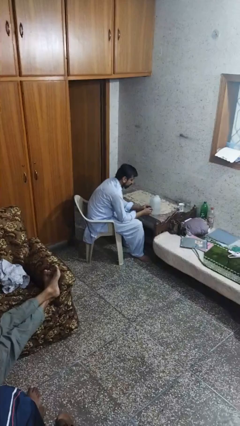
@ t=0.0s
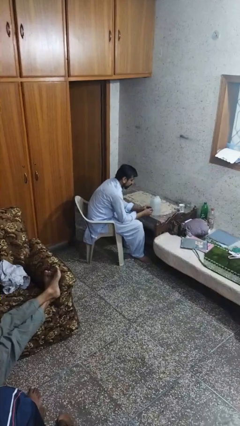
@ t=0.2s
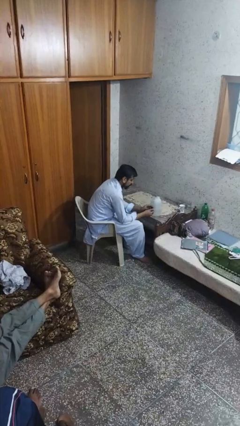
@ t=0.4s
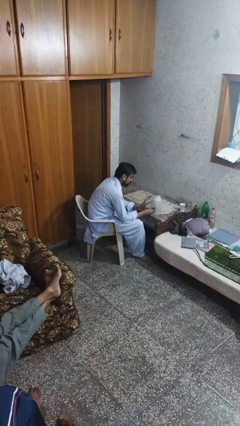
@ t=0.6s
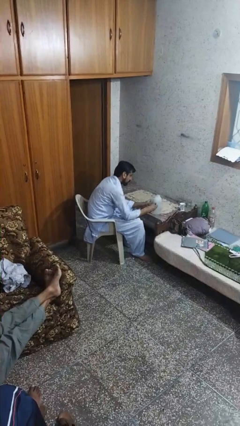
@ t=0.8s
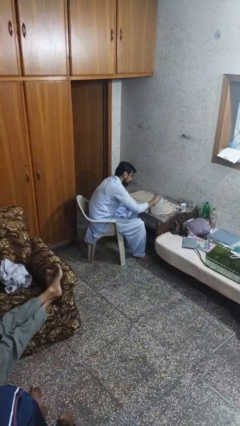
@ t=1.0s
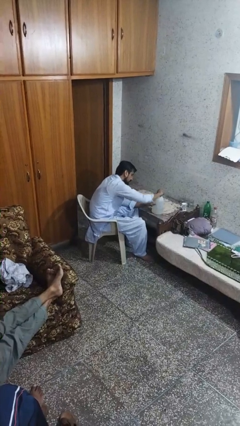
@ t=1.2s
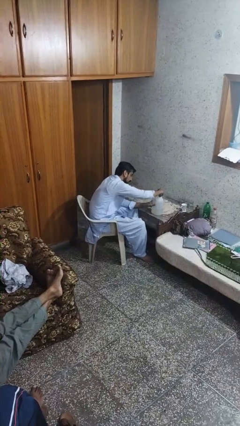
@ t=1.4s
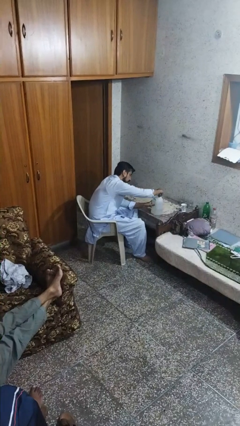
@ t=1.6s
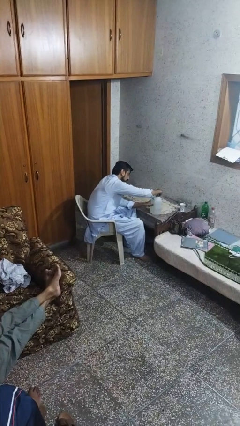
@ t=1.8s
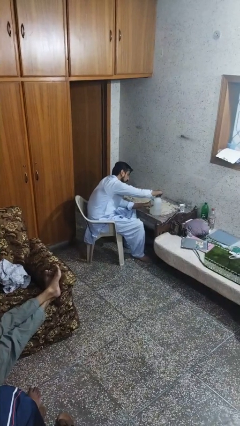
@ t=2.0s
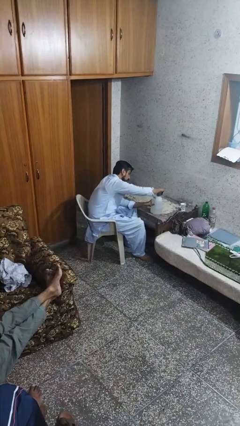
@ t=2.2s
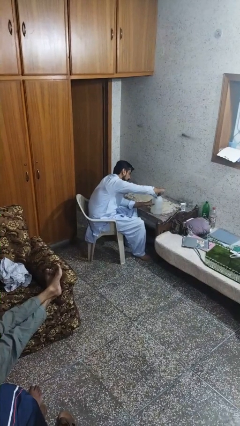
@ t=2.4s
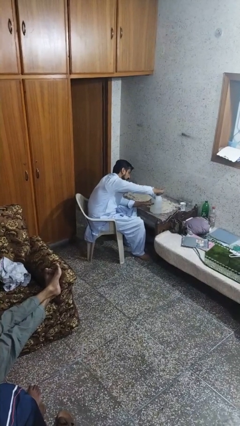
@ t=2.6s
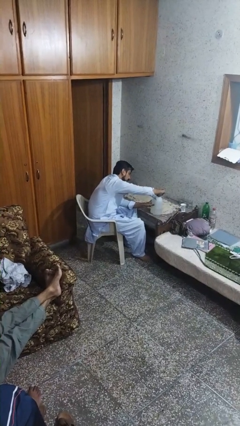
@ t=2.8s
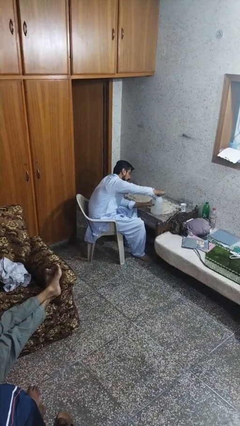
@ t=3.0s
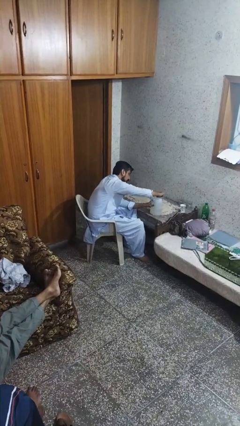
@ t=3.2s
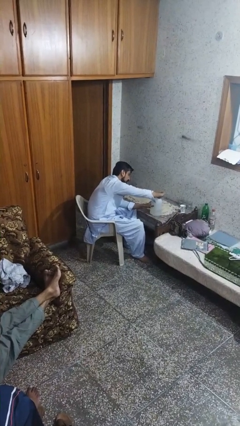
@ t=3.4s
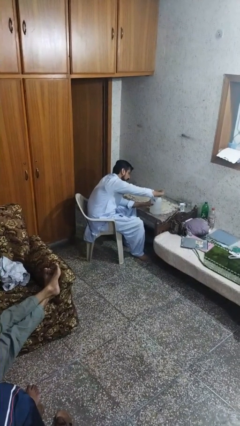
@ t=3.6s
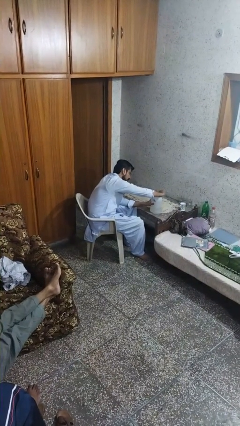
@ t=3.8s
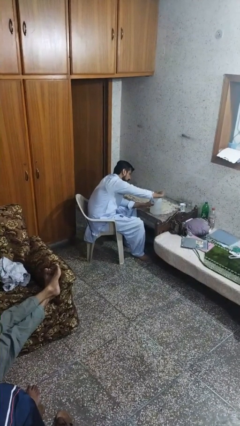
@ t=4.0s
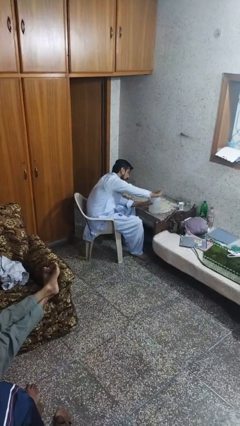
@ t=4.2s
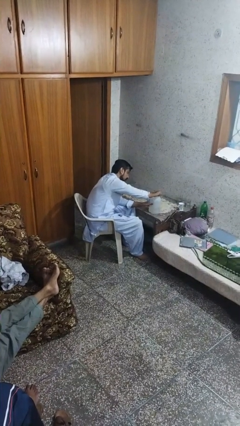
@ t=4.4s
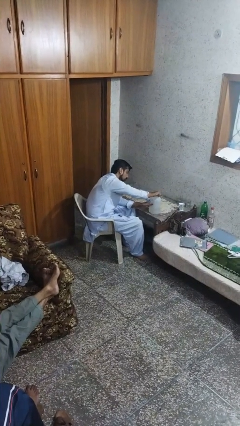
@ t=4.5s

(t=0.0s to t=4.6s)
person screws lid to bottle

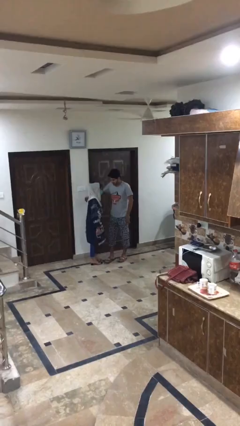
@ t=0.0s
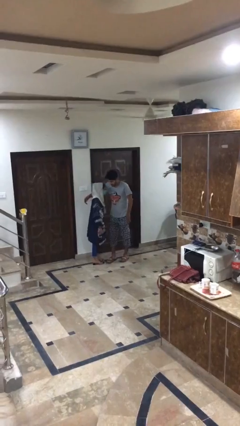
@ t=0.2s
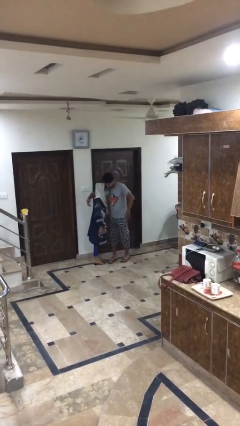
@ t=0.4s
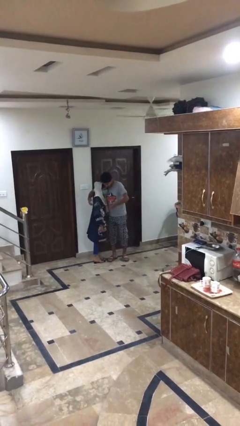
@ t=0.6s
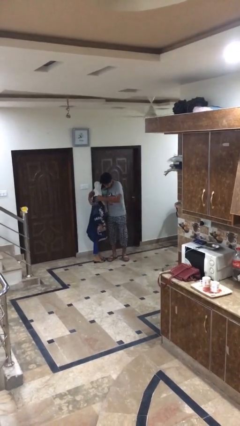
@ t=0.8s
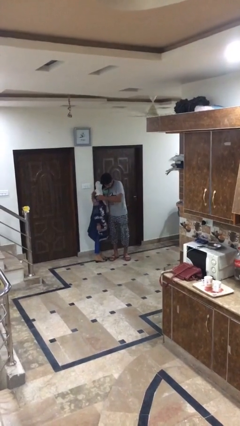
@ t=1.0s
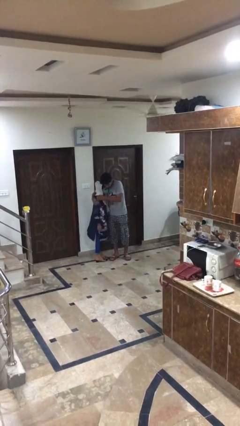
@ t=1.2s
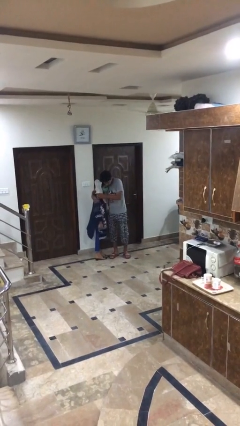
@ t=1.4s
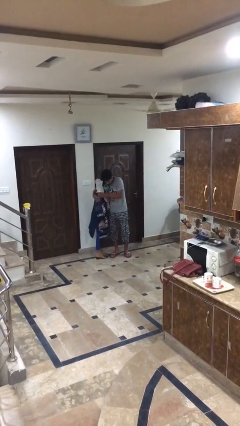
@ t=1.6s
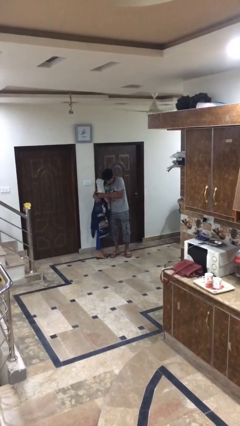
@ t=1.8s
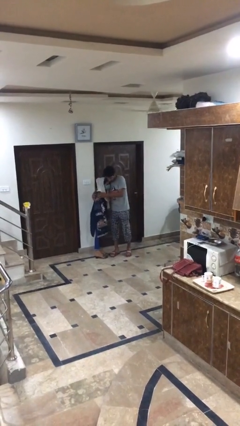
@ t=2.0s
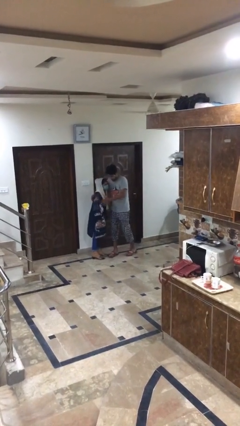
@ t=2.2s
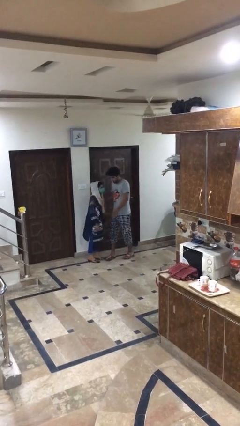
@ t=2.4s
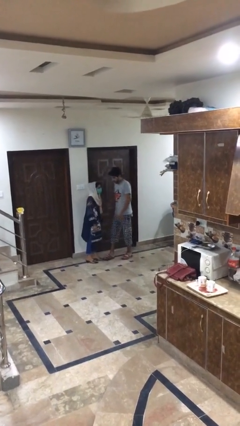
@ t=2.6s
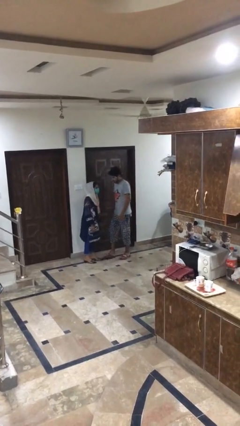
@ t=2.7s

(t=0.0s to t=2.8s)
person embraces person

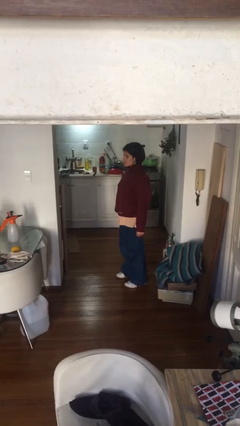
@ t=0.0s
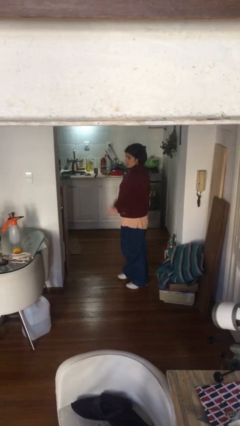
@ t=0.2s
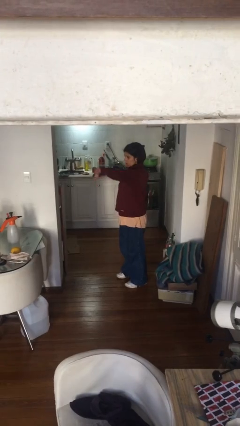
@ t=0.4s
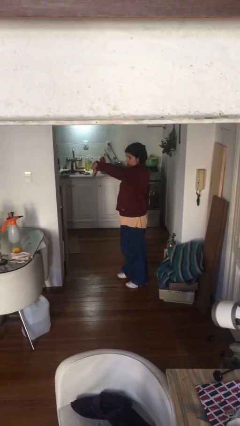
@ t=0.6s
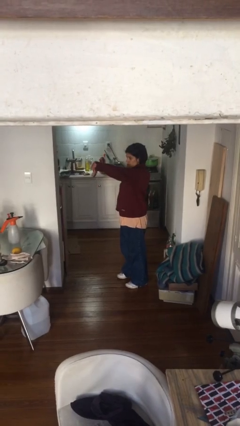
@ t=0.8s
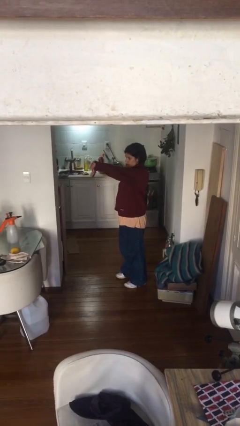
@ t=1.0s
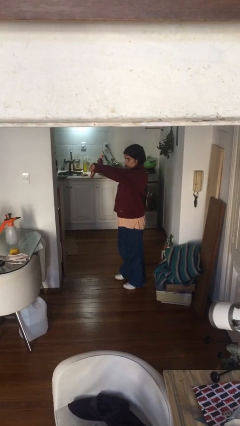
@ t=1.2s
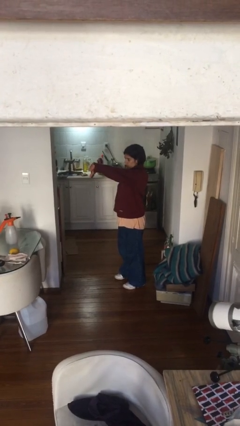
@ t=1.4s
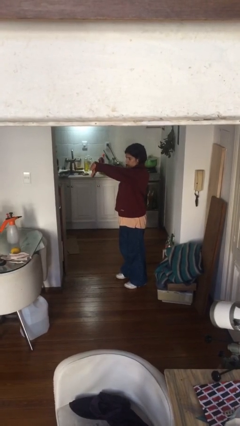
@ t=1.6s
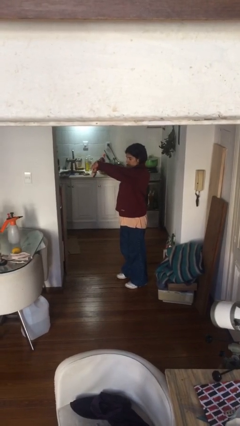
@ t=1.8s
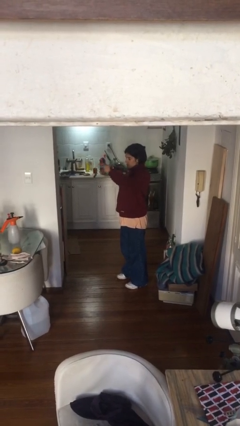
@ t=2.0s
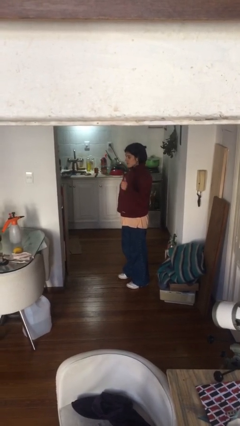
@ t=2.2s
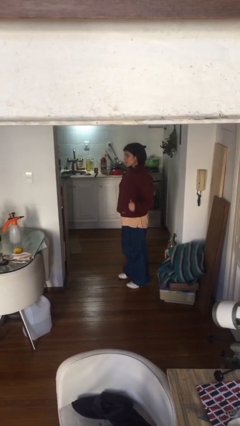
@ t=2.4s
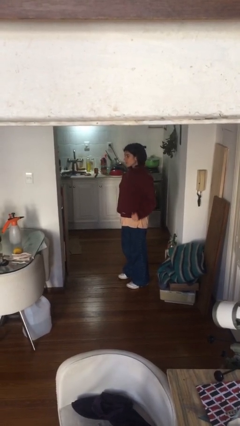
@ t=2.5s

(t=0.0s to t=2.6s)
person gestures thumbs down

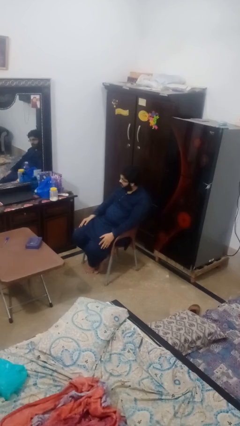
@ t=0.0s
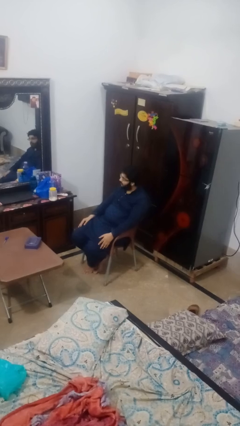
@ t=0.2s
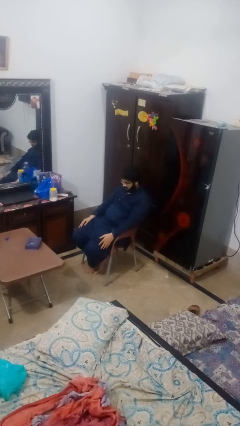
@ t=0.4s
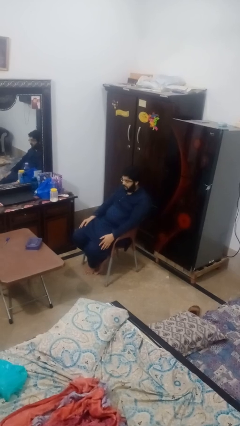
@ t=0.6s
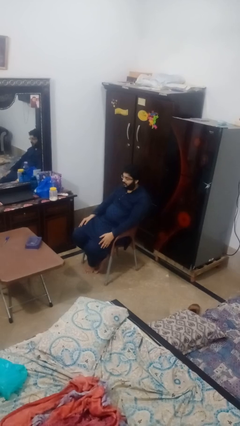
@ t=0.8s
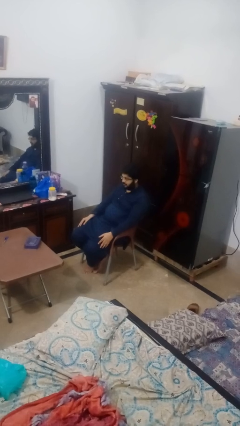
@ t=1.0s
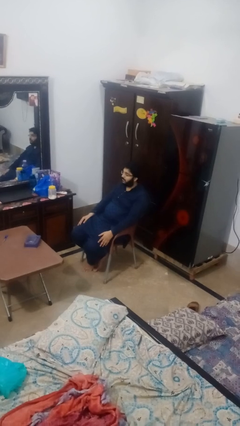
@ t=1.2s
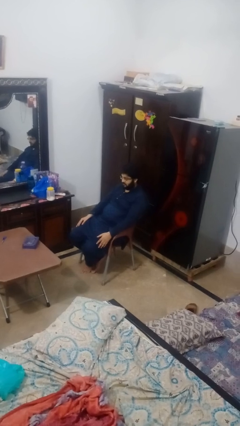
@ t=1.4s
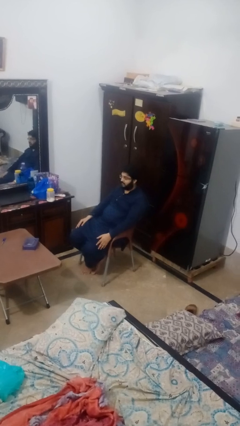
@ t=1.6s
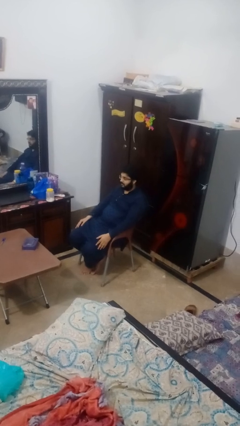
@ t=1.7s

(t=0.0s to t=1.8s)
person nods head

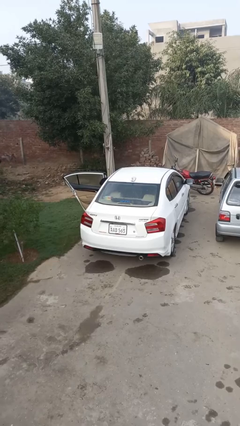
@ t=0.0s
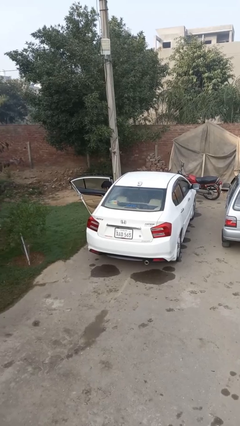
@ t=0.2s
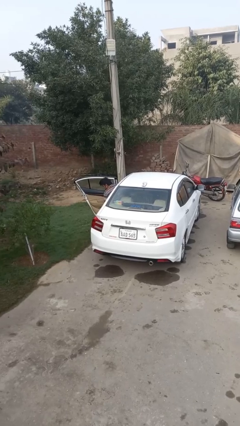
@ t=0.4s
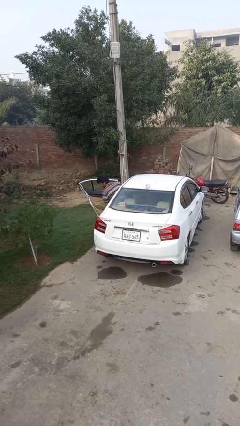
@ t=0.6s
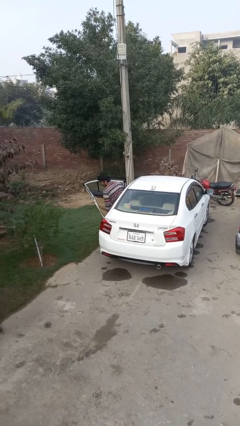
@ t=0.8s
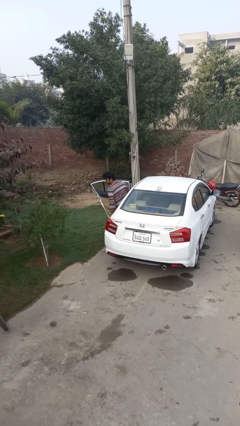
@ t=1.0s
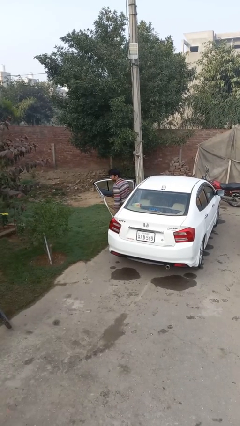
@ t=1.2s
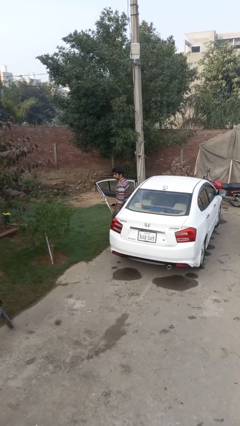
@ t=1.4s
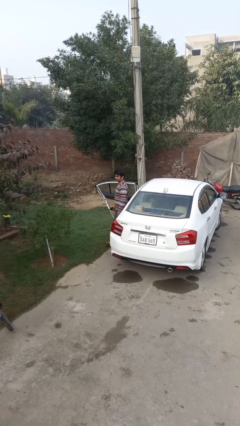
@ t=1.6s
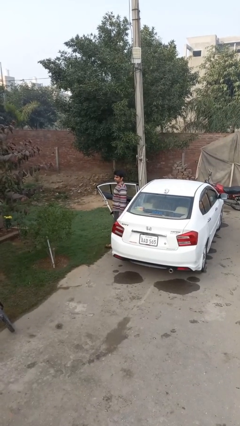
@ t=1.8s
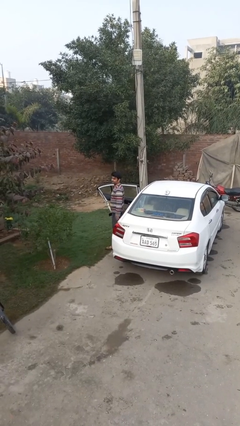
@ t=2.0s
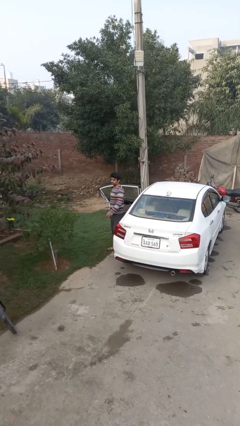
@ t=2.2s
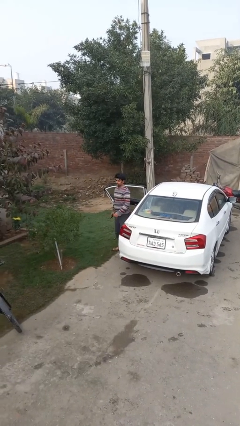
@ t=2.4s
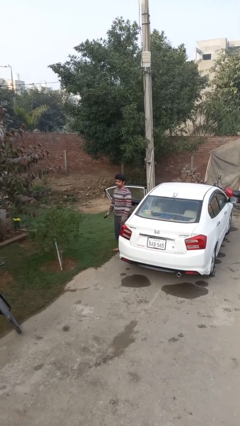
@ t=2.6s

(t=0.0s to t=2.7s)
person exits car

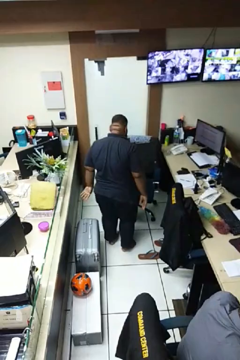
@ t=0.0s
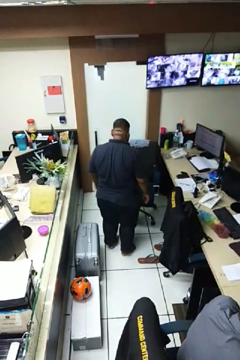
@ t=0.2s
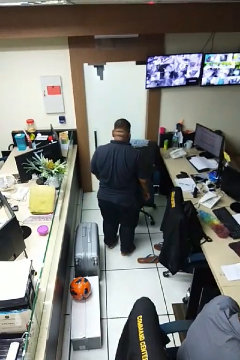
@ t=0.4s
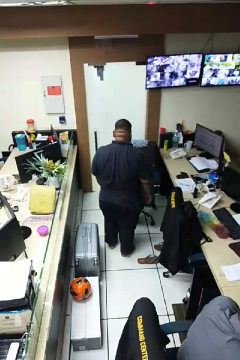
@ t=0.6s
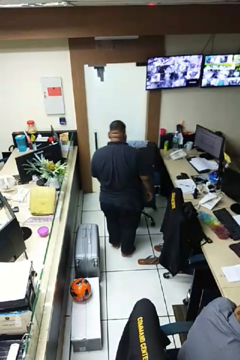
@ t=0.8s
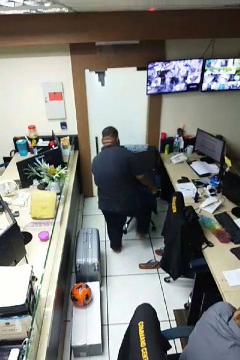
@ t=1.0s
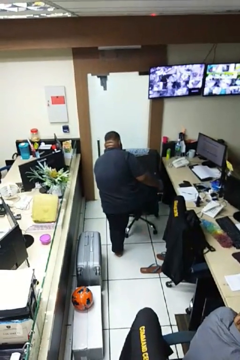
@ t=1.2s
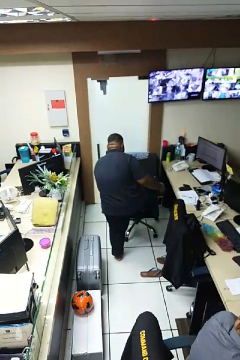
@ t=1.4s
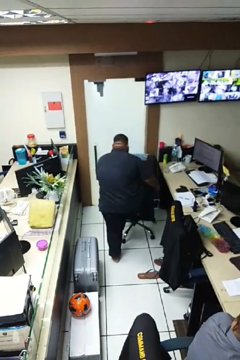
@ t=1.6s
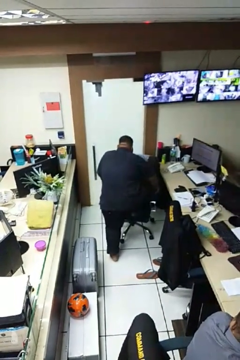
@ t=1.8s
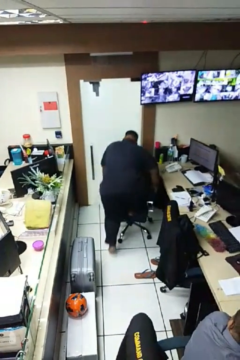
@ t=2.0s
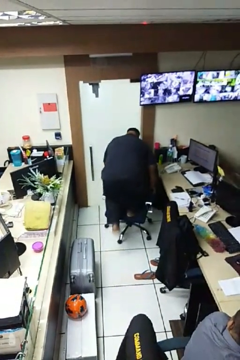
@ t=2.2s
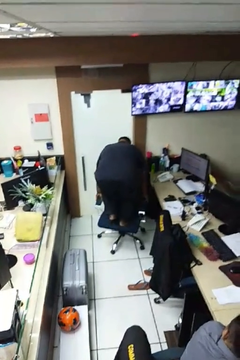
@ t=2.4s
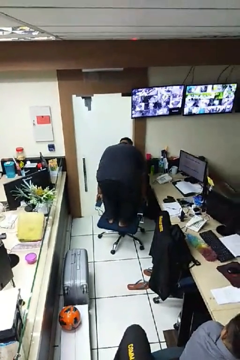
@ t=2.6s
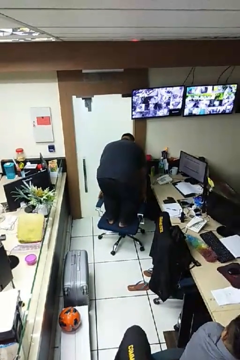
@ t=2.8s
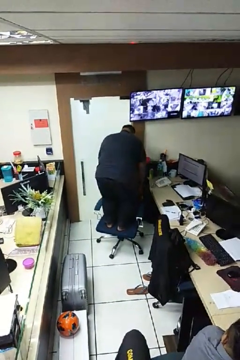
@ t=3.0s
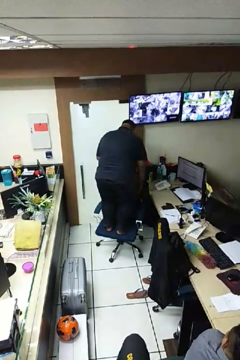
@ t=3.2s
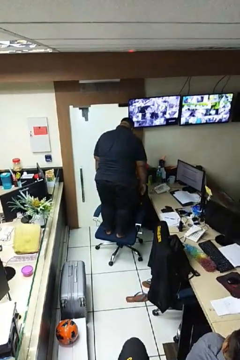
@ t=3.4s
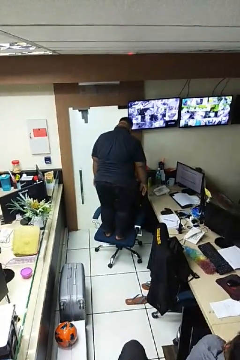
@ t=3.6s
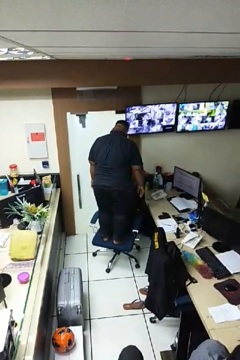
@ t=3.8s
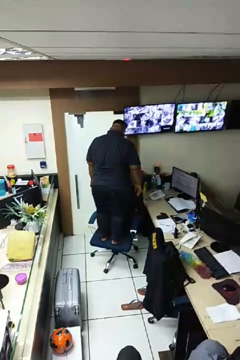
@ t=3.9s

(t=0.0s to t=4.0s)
person climbs on chair
